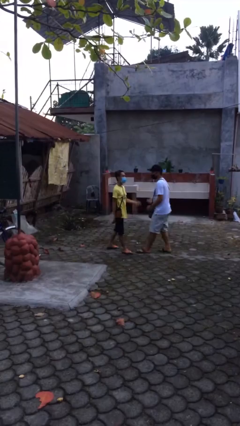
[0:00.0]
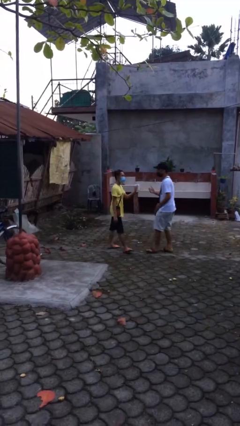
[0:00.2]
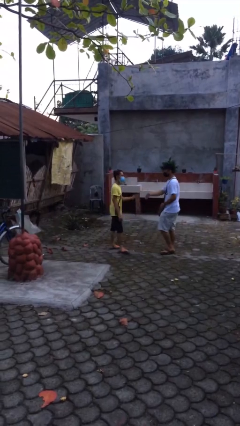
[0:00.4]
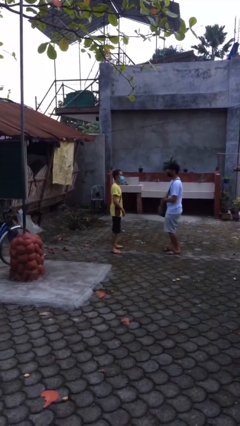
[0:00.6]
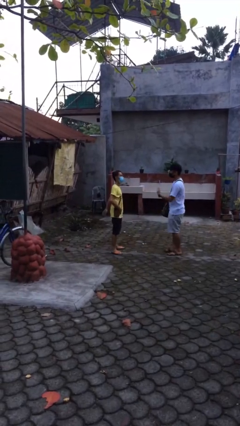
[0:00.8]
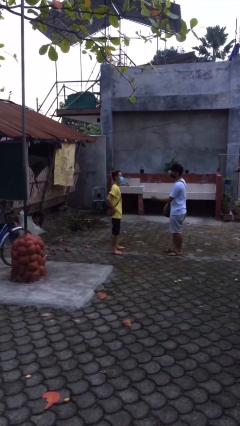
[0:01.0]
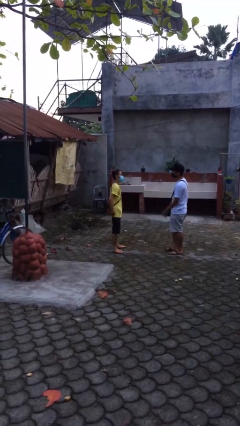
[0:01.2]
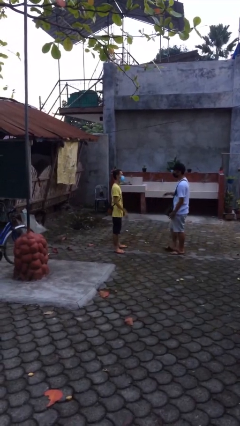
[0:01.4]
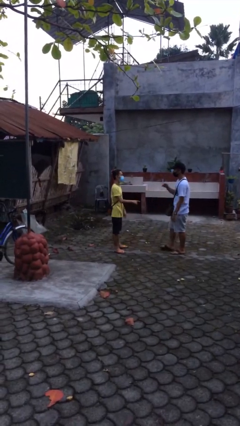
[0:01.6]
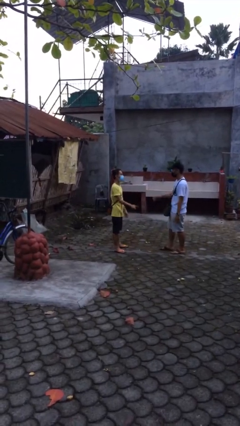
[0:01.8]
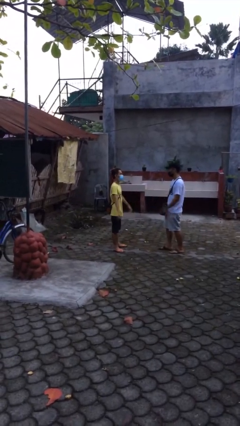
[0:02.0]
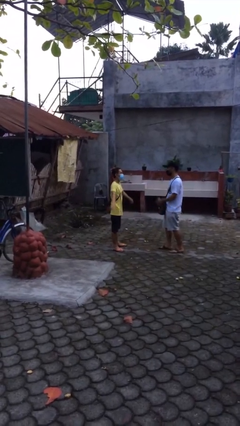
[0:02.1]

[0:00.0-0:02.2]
person talks to person

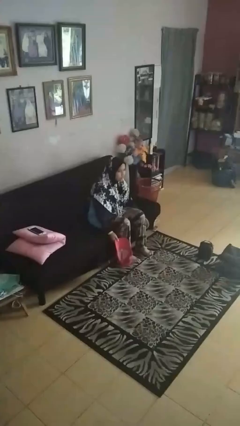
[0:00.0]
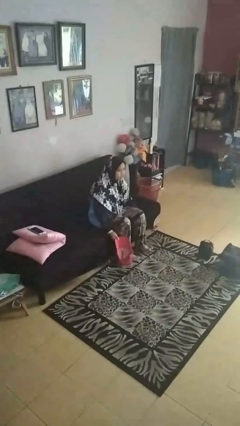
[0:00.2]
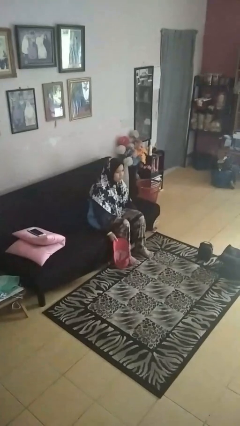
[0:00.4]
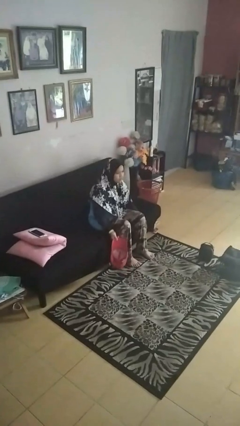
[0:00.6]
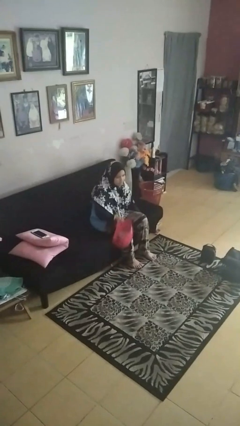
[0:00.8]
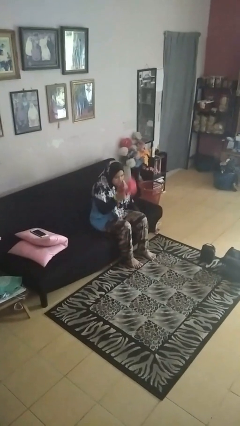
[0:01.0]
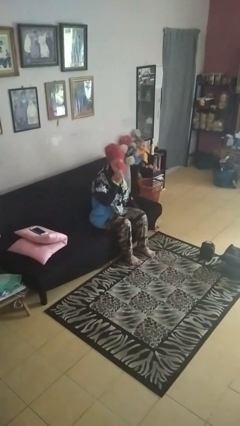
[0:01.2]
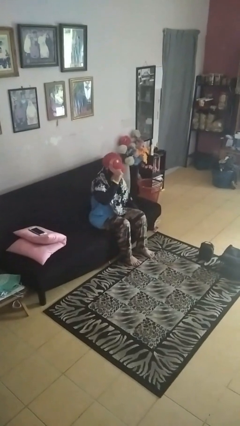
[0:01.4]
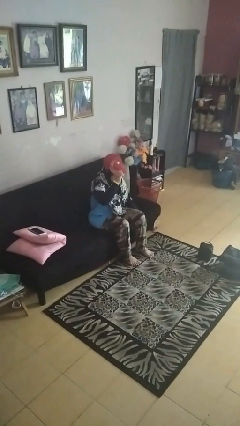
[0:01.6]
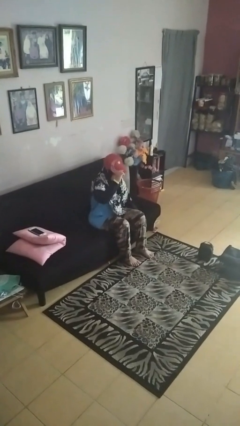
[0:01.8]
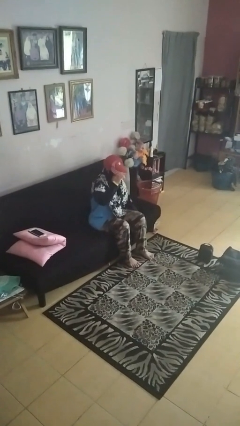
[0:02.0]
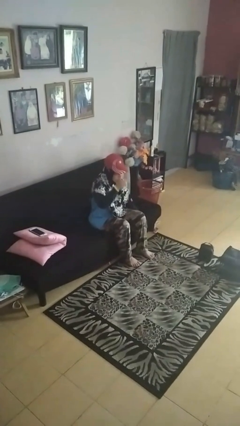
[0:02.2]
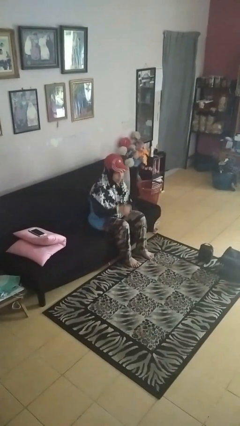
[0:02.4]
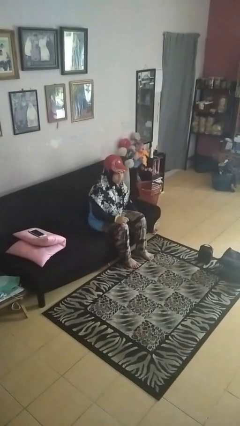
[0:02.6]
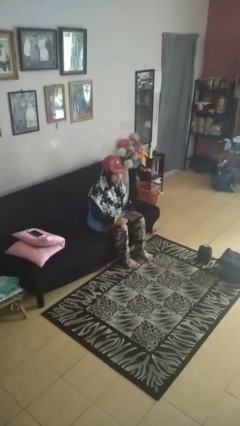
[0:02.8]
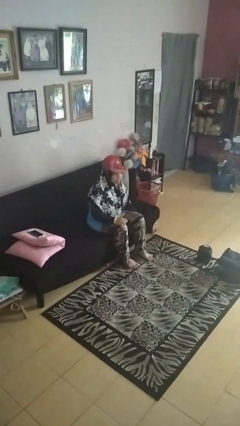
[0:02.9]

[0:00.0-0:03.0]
person puts on hat

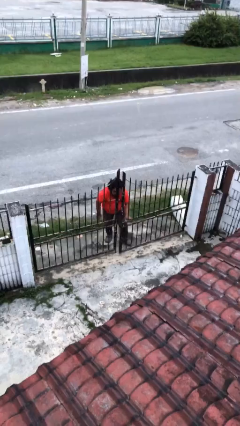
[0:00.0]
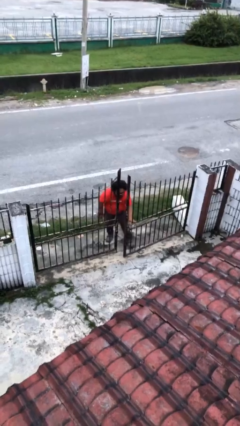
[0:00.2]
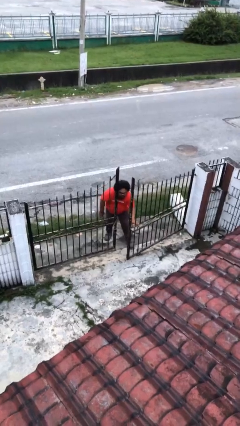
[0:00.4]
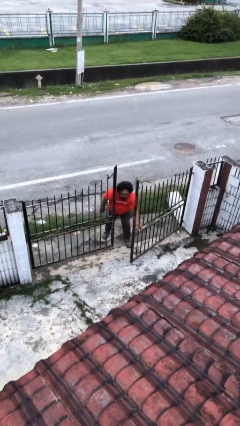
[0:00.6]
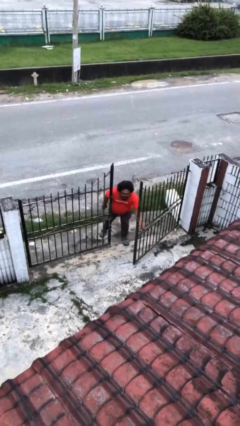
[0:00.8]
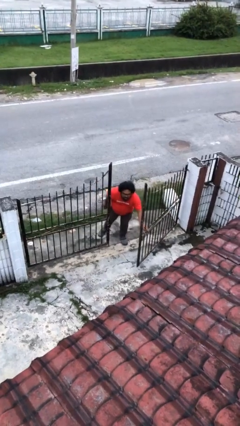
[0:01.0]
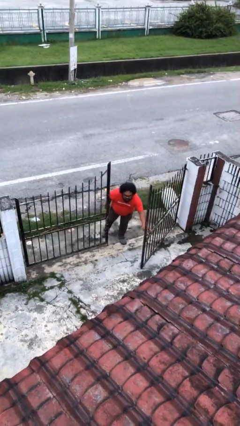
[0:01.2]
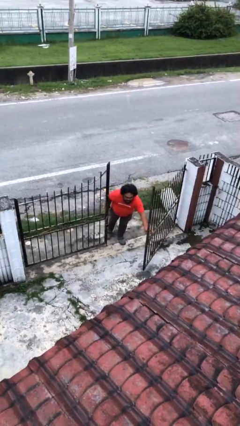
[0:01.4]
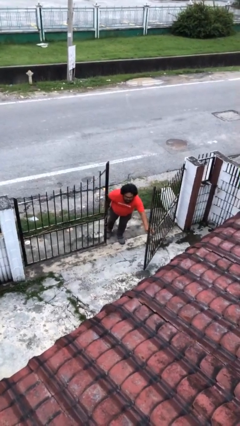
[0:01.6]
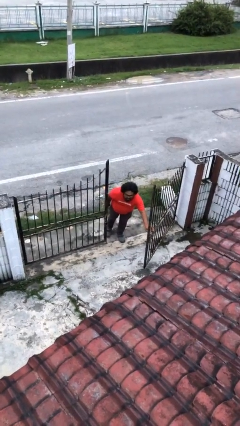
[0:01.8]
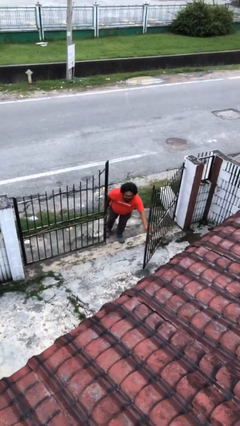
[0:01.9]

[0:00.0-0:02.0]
person opens facility door

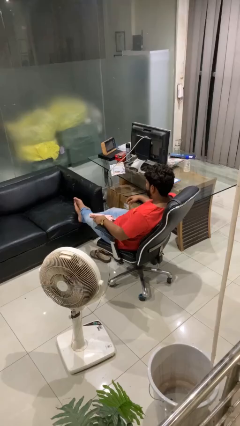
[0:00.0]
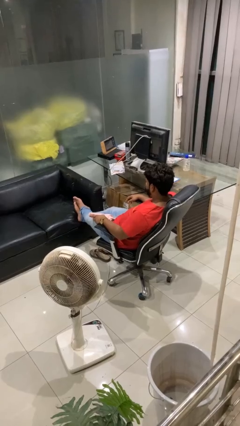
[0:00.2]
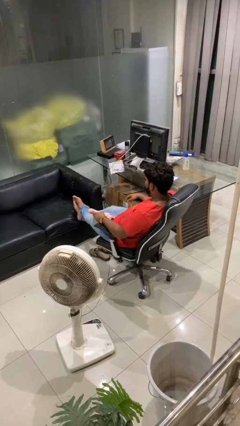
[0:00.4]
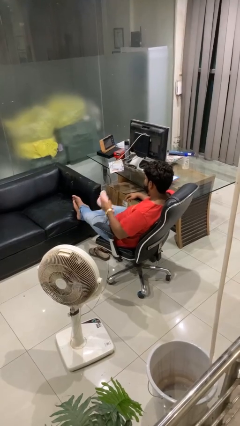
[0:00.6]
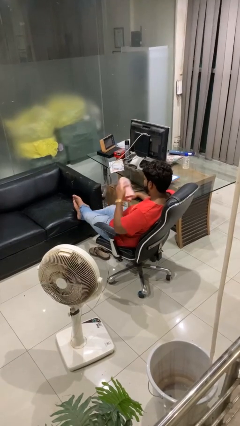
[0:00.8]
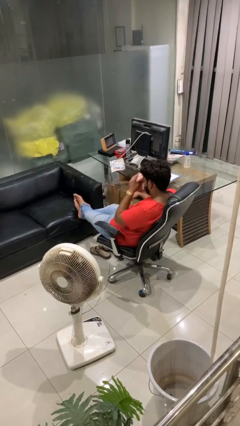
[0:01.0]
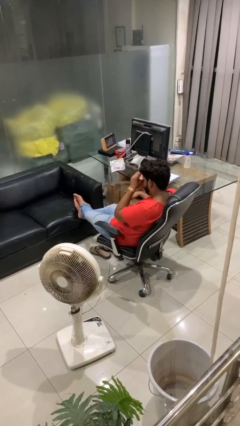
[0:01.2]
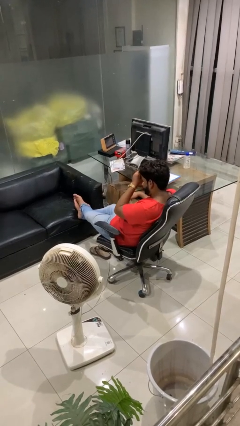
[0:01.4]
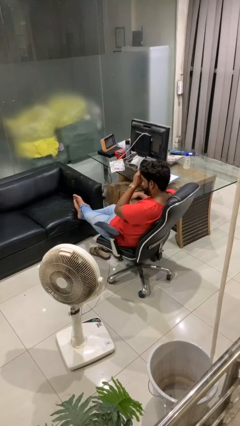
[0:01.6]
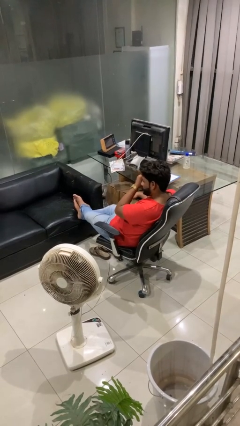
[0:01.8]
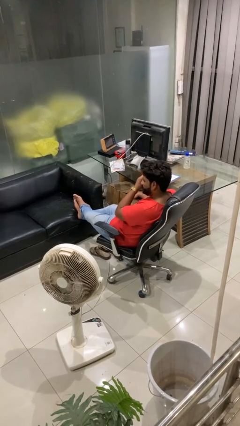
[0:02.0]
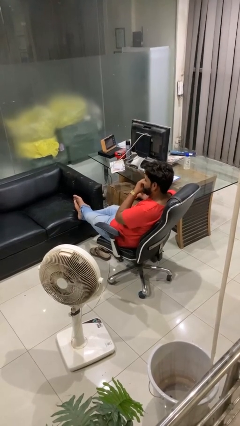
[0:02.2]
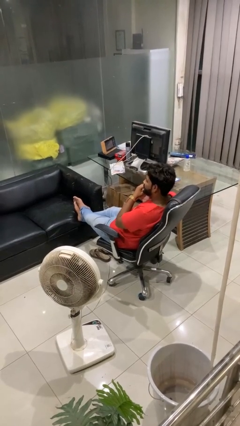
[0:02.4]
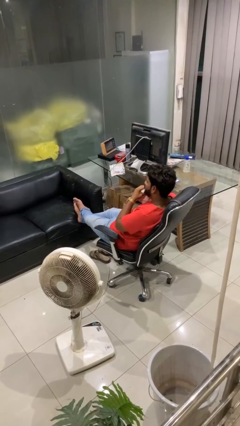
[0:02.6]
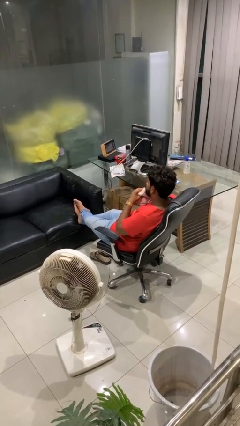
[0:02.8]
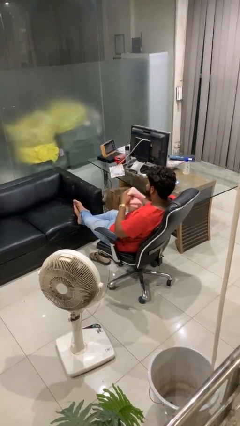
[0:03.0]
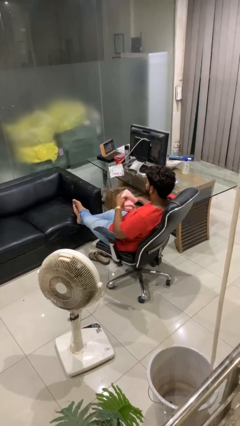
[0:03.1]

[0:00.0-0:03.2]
person wipes mouth with napkin

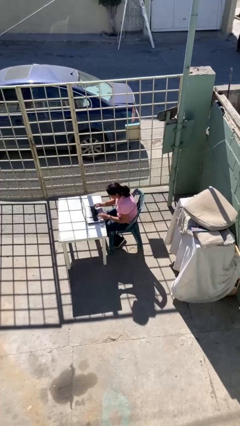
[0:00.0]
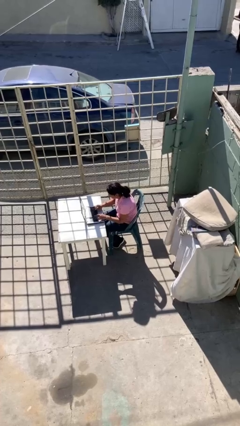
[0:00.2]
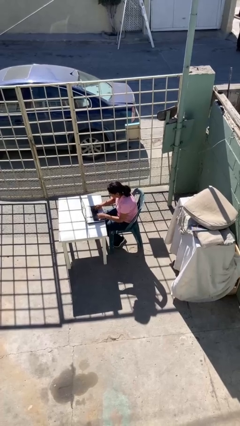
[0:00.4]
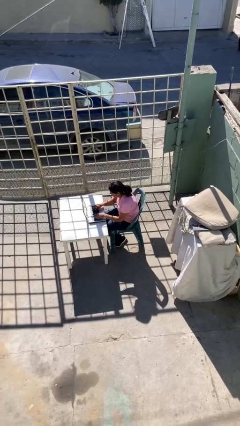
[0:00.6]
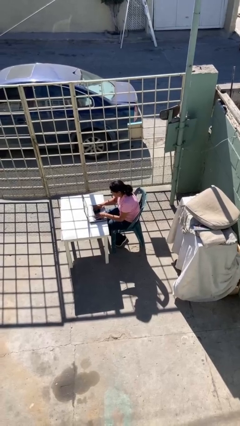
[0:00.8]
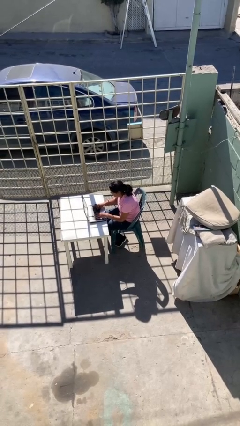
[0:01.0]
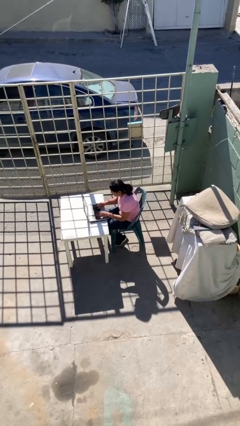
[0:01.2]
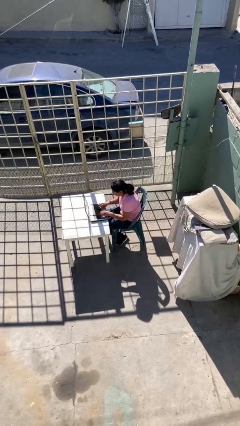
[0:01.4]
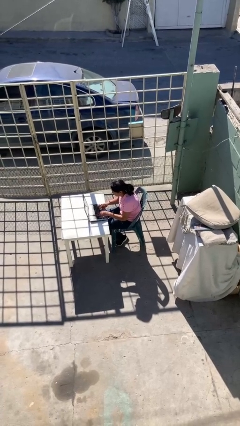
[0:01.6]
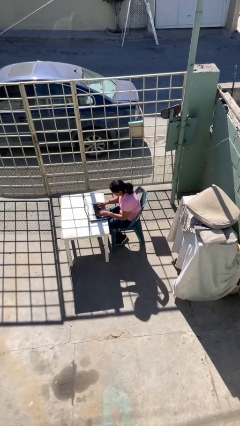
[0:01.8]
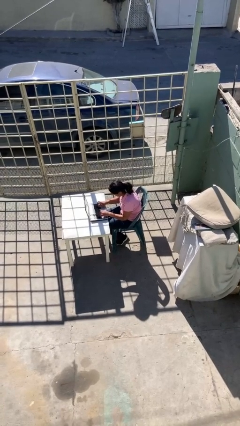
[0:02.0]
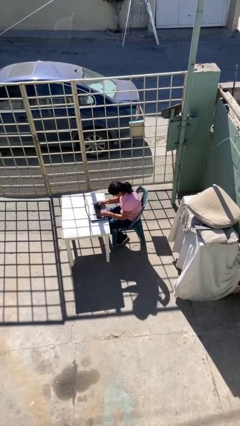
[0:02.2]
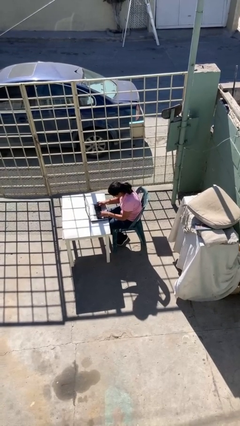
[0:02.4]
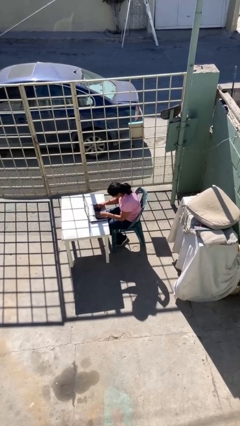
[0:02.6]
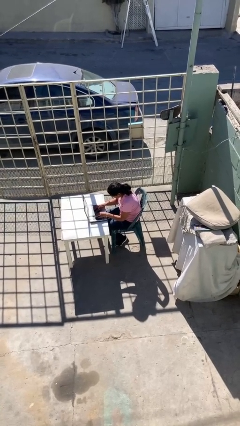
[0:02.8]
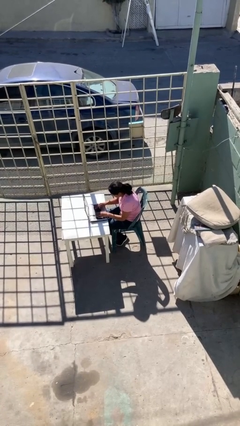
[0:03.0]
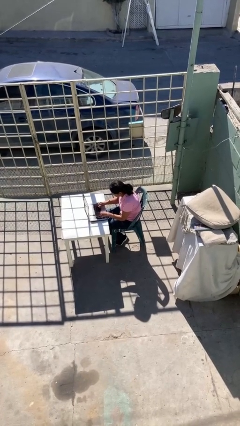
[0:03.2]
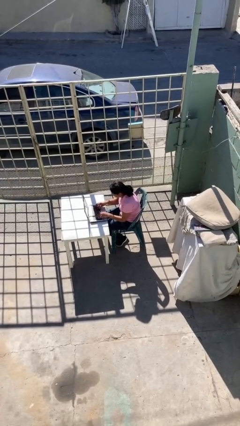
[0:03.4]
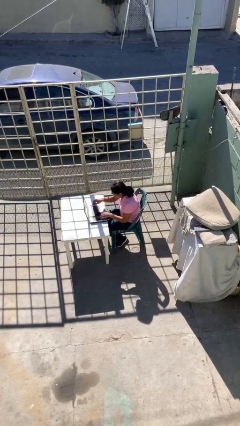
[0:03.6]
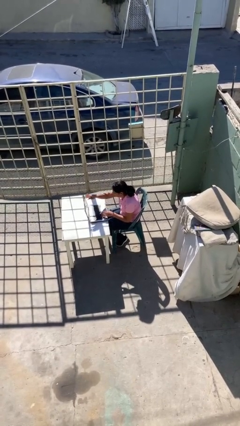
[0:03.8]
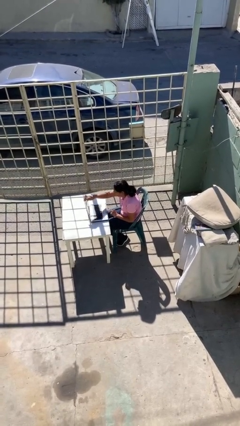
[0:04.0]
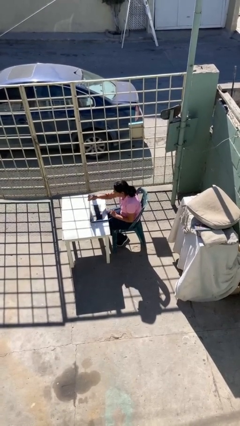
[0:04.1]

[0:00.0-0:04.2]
person interacts with laptop

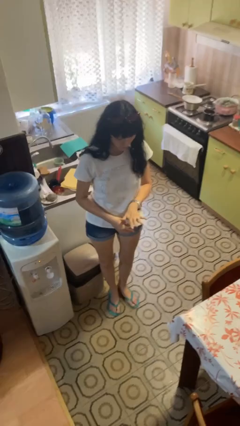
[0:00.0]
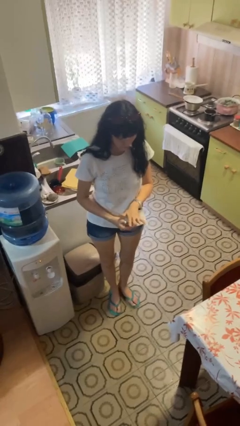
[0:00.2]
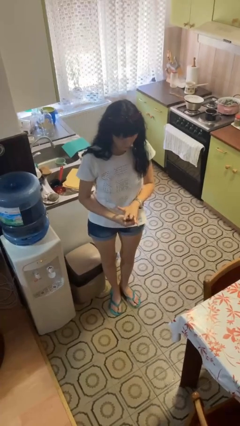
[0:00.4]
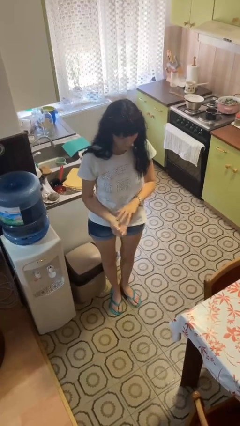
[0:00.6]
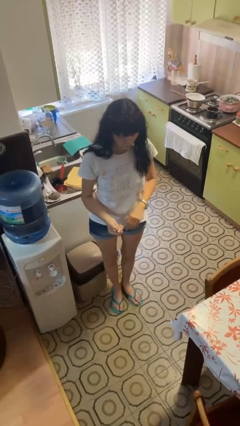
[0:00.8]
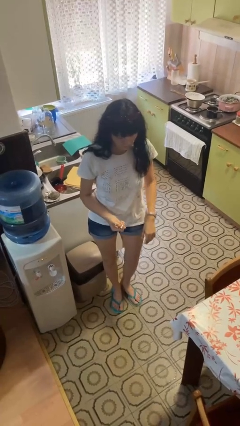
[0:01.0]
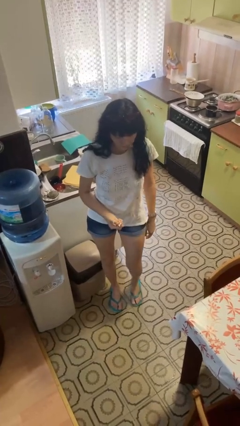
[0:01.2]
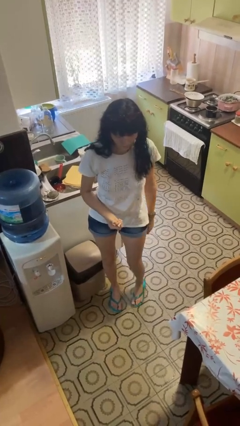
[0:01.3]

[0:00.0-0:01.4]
person takes off ring

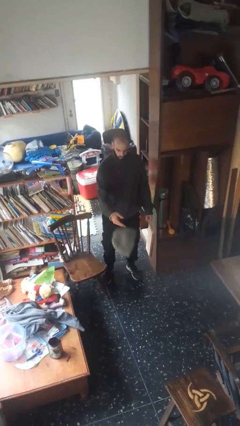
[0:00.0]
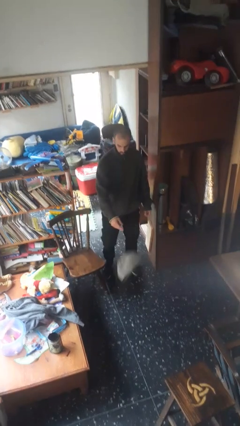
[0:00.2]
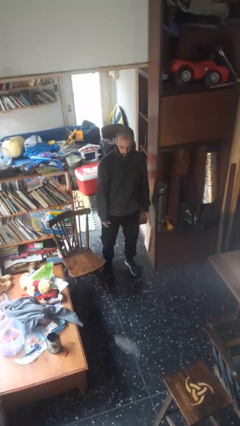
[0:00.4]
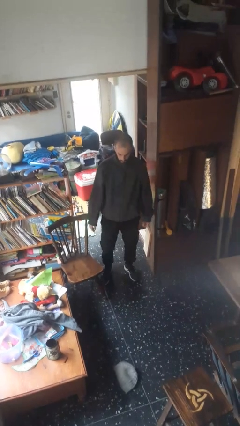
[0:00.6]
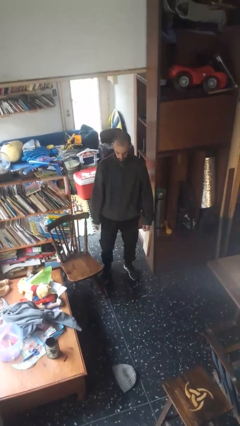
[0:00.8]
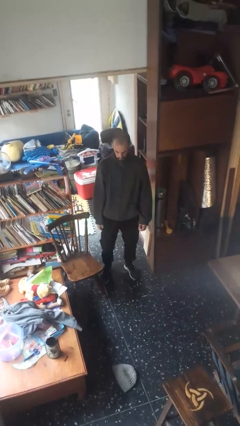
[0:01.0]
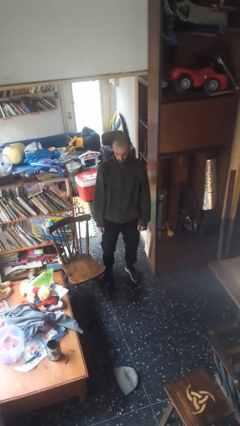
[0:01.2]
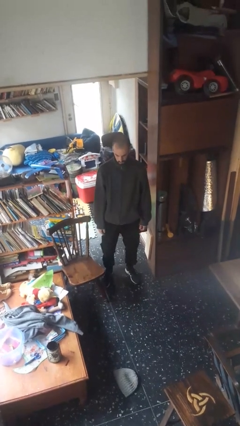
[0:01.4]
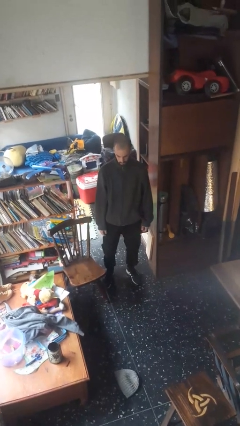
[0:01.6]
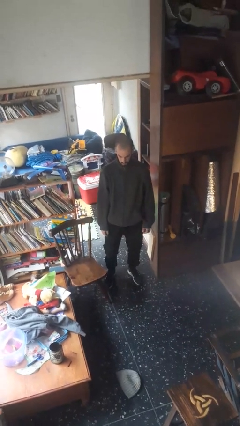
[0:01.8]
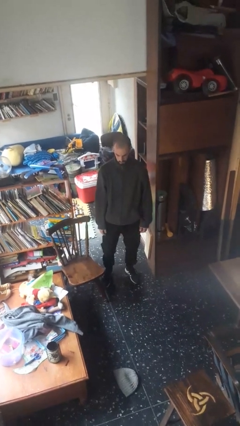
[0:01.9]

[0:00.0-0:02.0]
person throws object to ground
